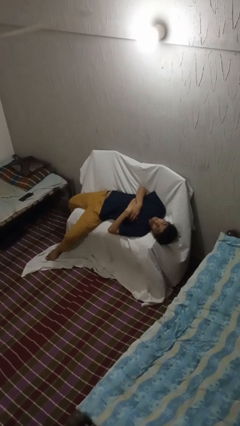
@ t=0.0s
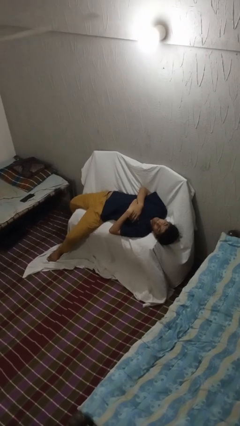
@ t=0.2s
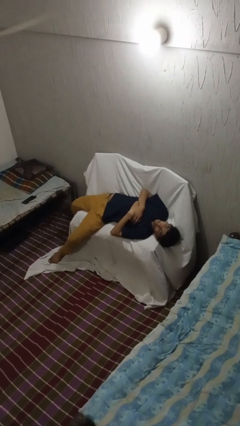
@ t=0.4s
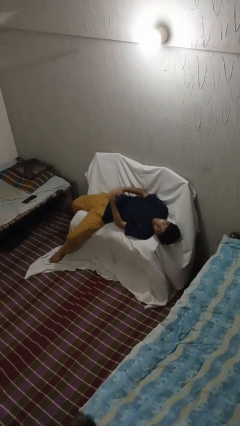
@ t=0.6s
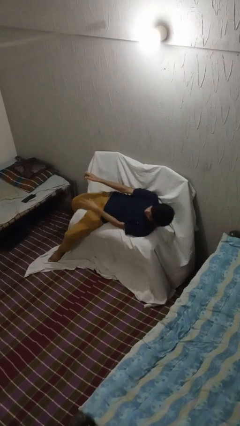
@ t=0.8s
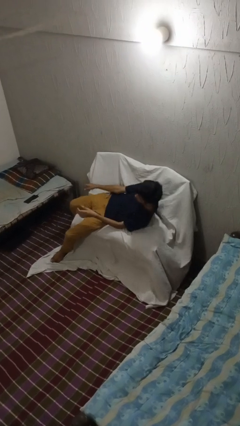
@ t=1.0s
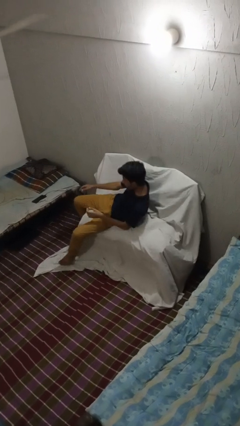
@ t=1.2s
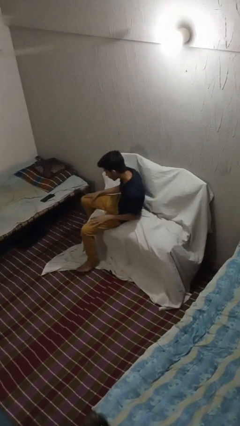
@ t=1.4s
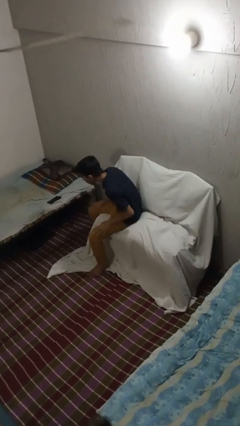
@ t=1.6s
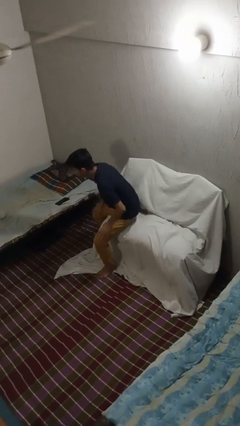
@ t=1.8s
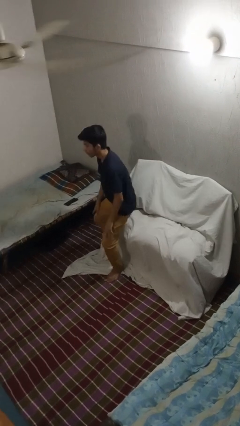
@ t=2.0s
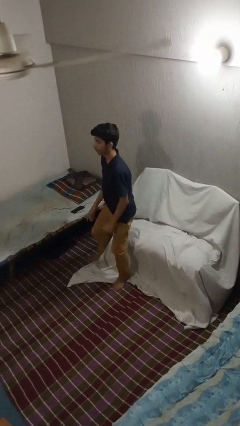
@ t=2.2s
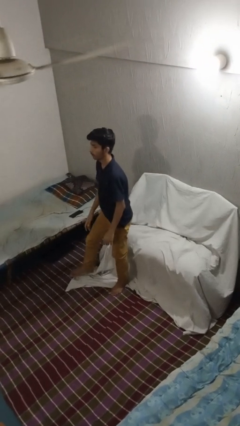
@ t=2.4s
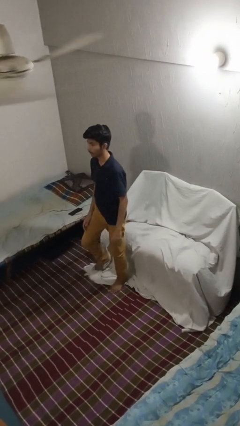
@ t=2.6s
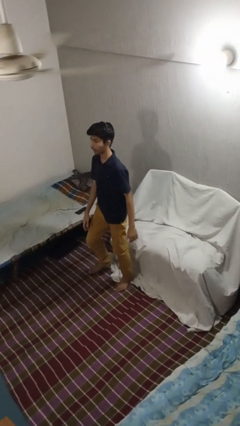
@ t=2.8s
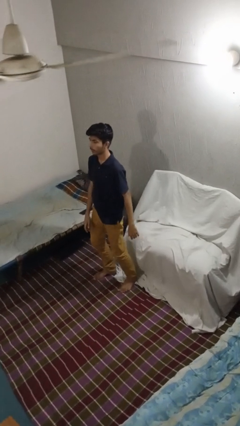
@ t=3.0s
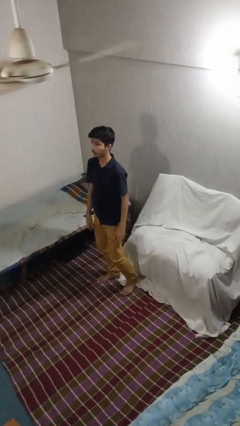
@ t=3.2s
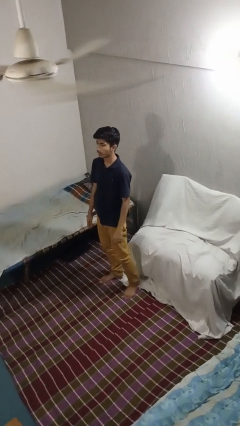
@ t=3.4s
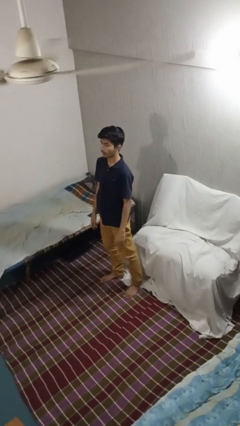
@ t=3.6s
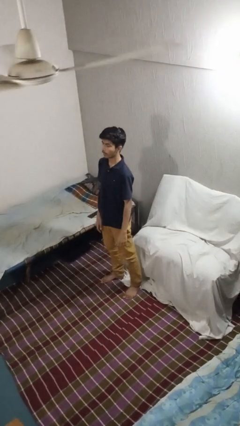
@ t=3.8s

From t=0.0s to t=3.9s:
person stands up

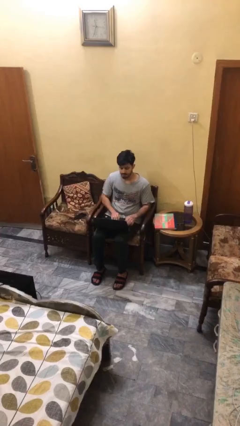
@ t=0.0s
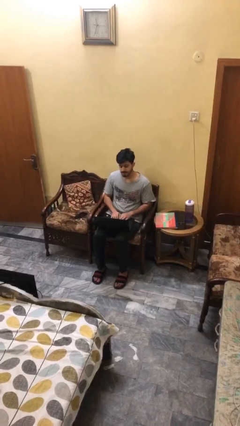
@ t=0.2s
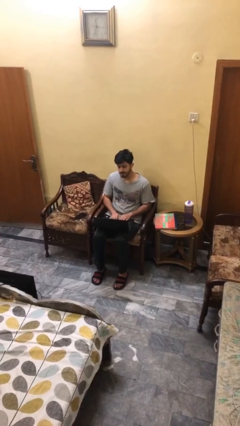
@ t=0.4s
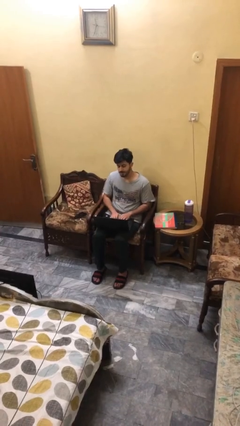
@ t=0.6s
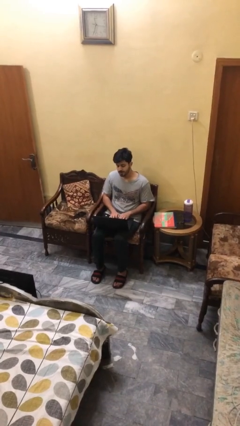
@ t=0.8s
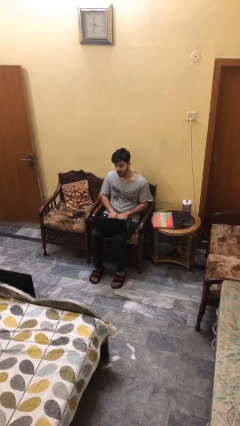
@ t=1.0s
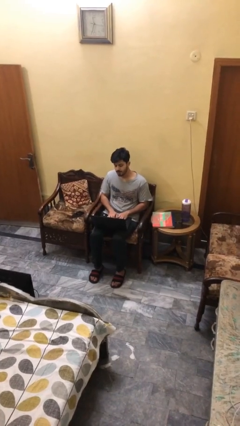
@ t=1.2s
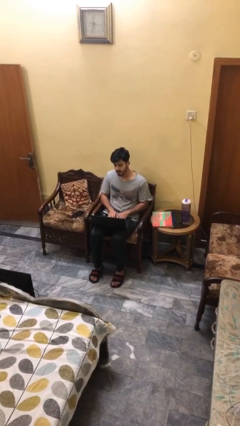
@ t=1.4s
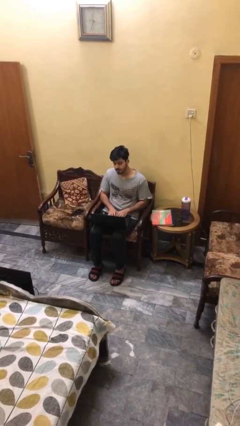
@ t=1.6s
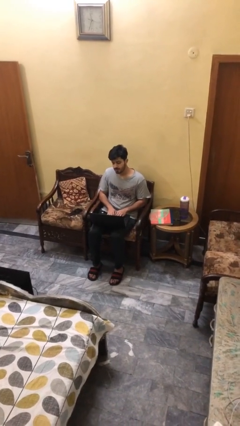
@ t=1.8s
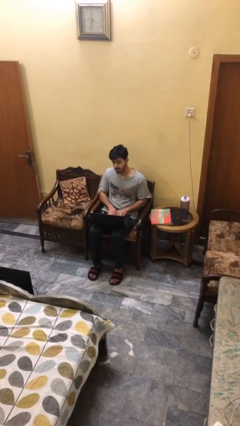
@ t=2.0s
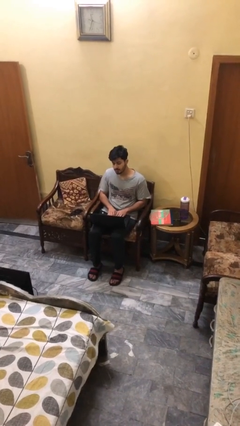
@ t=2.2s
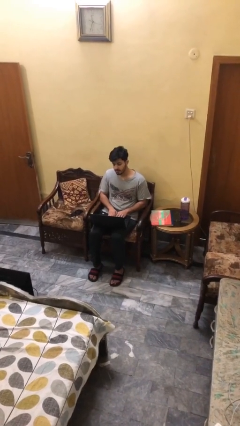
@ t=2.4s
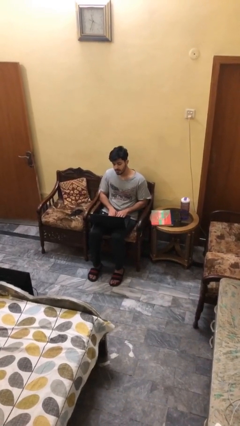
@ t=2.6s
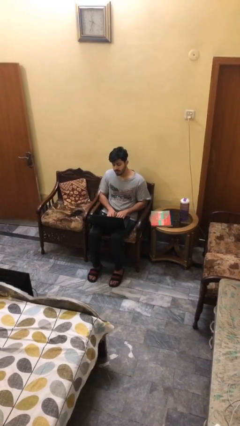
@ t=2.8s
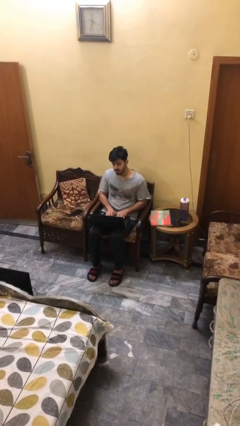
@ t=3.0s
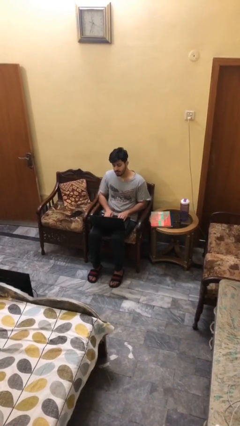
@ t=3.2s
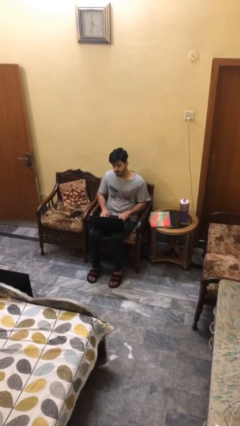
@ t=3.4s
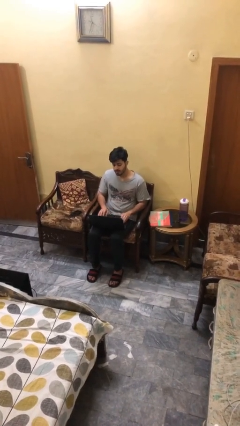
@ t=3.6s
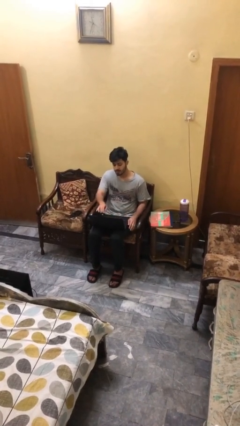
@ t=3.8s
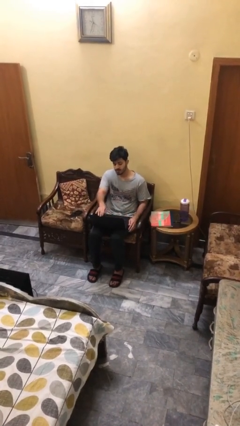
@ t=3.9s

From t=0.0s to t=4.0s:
person interacts with laptop

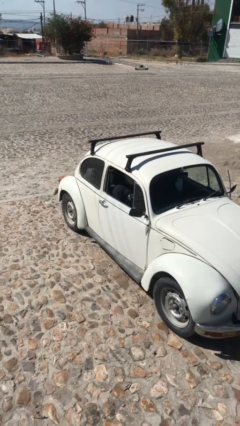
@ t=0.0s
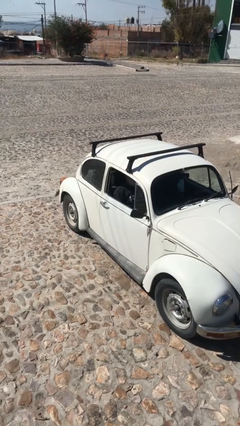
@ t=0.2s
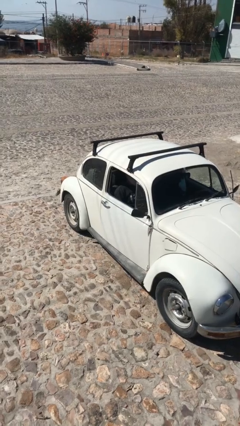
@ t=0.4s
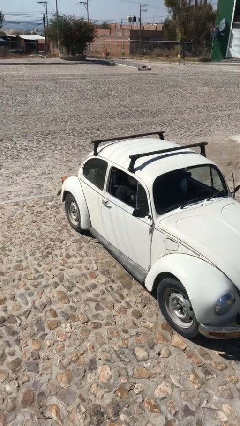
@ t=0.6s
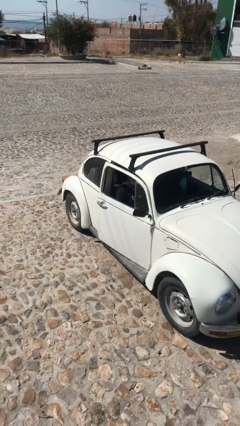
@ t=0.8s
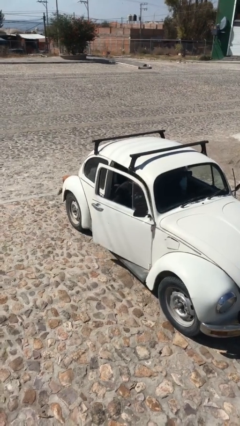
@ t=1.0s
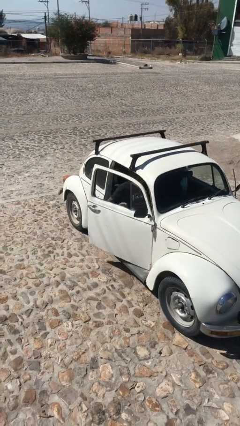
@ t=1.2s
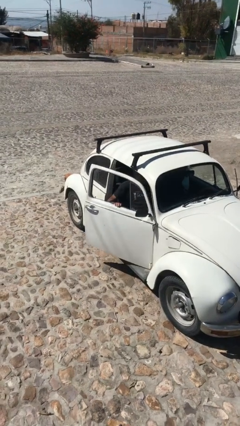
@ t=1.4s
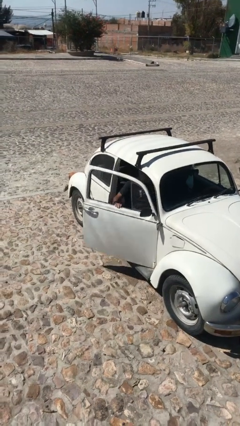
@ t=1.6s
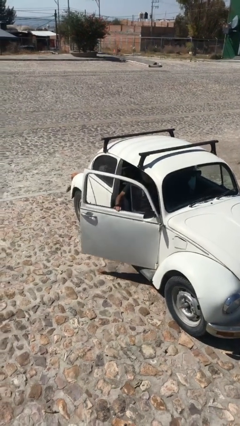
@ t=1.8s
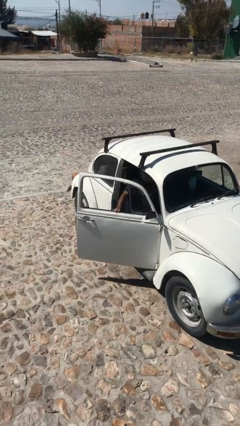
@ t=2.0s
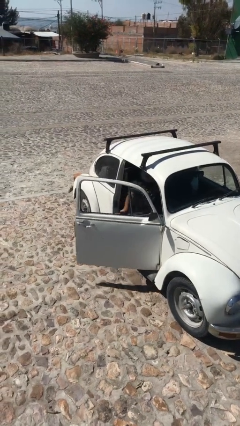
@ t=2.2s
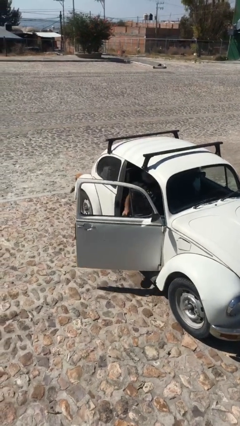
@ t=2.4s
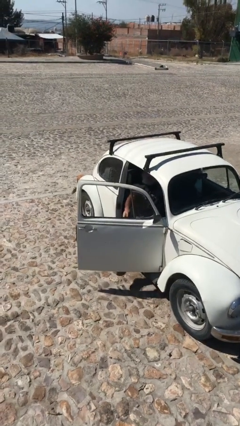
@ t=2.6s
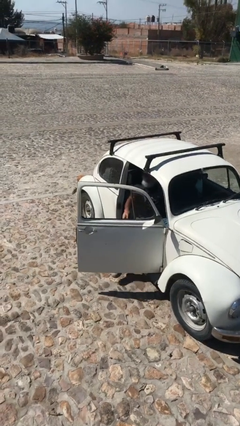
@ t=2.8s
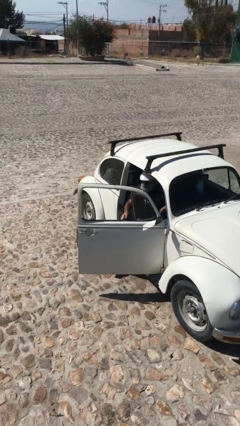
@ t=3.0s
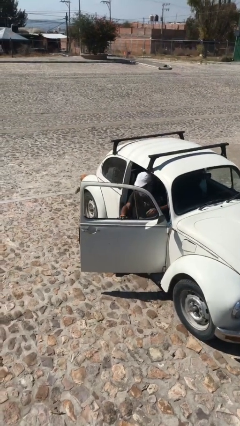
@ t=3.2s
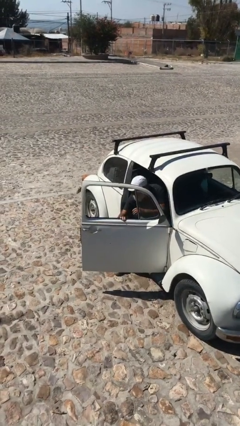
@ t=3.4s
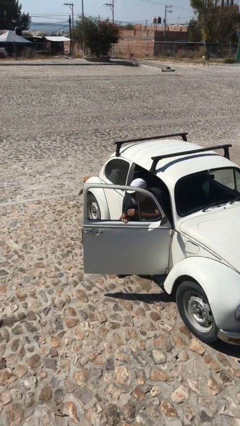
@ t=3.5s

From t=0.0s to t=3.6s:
person opens car door

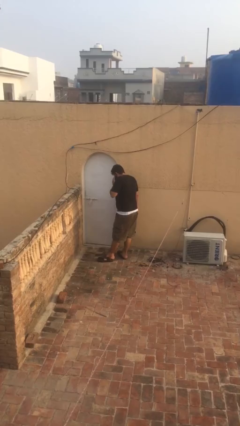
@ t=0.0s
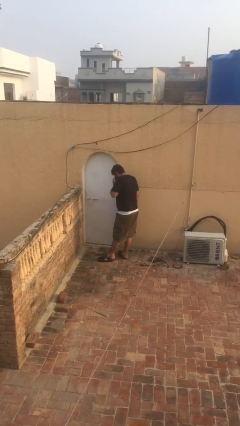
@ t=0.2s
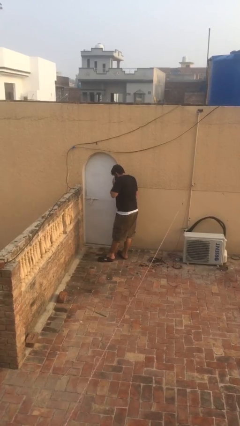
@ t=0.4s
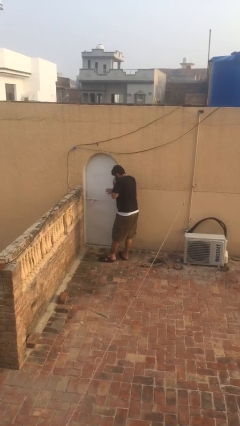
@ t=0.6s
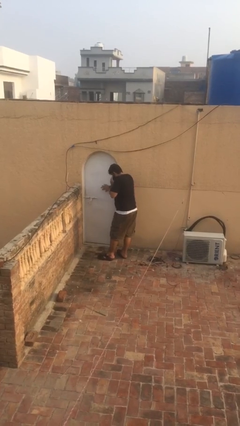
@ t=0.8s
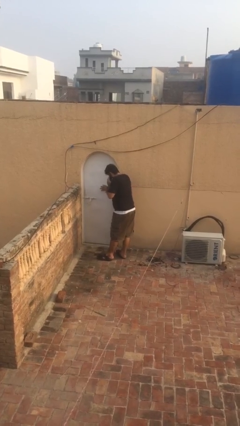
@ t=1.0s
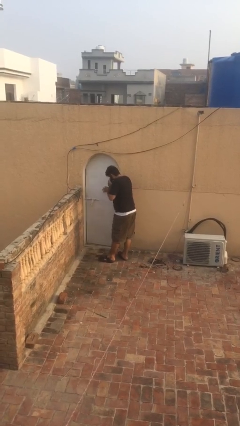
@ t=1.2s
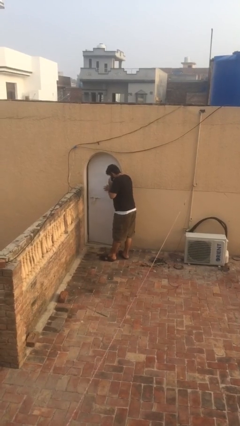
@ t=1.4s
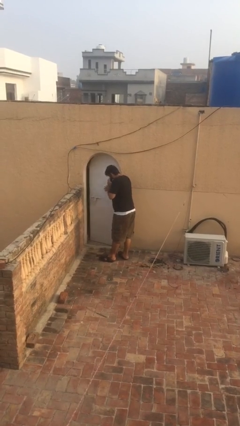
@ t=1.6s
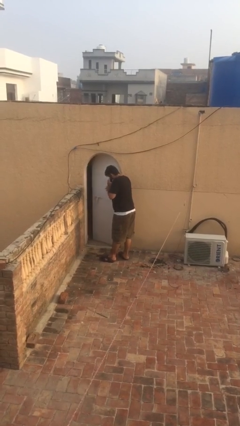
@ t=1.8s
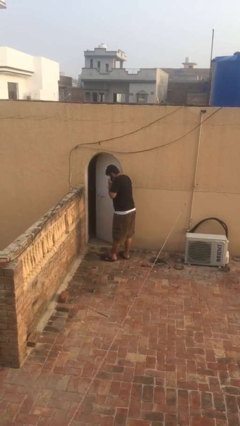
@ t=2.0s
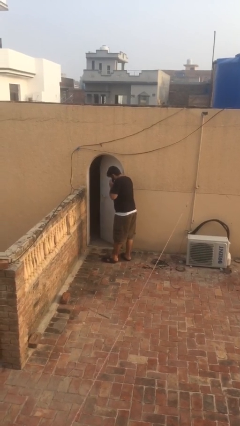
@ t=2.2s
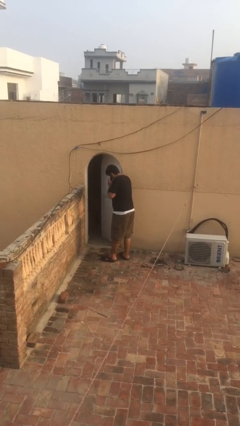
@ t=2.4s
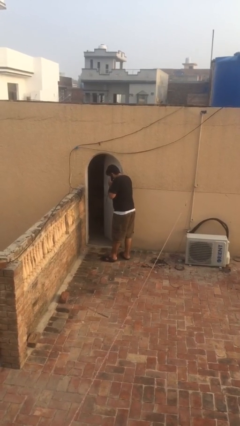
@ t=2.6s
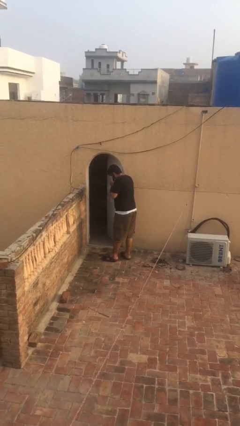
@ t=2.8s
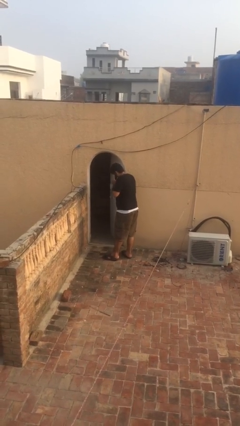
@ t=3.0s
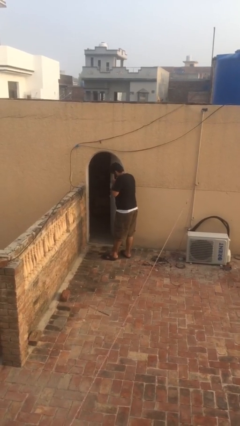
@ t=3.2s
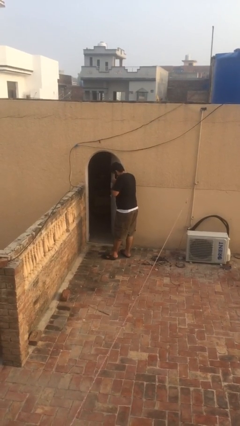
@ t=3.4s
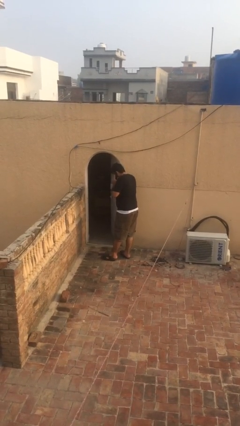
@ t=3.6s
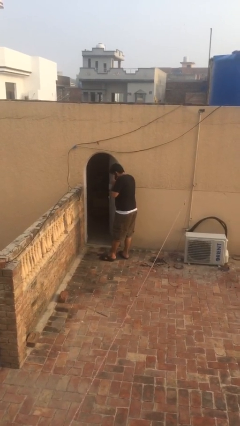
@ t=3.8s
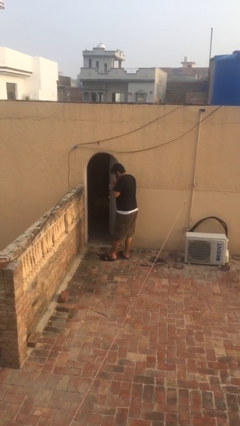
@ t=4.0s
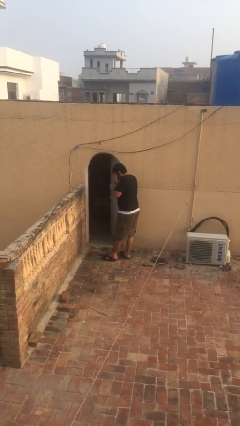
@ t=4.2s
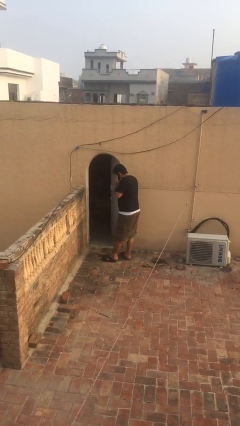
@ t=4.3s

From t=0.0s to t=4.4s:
person opens facility door

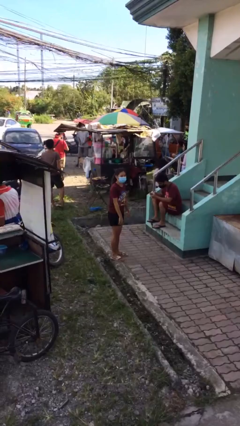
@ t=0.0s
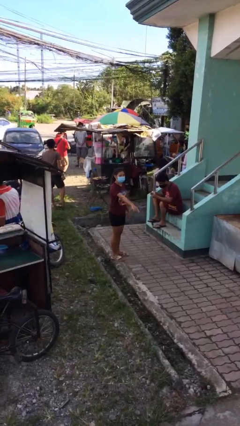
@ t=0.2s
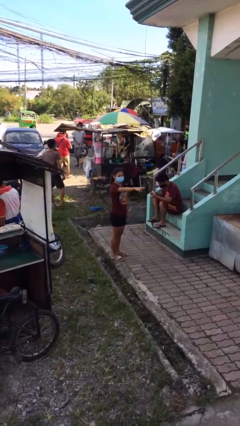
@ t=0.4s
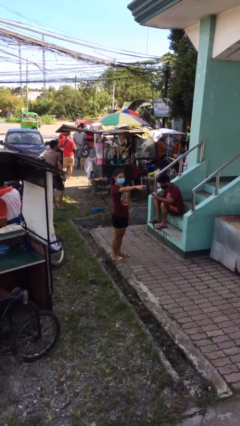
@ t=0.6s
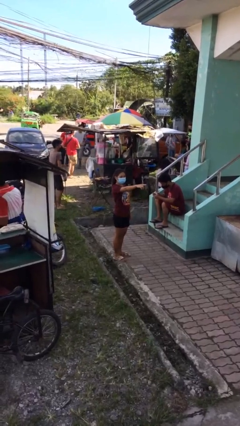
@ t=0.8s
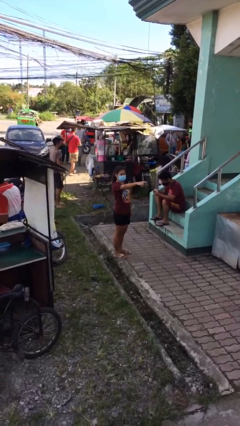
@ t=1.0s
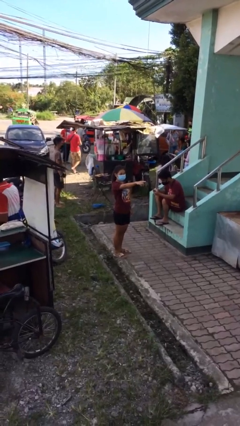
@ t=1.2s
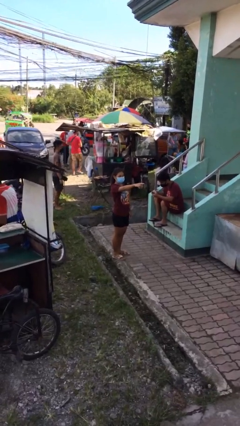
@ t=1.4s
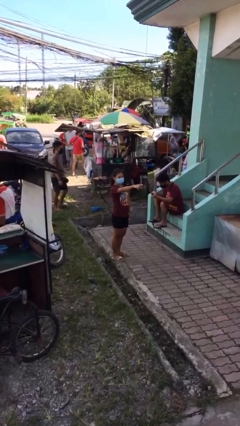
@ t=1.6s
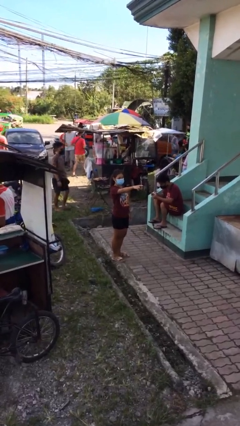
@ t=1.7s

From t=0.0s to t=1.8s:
person points at person
